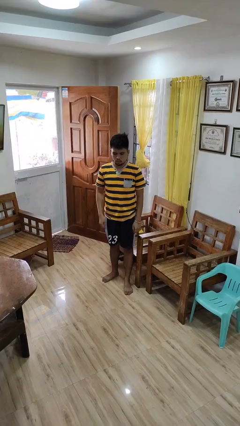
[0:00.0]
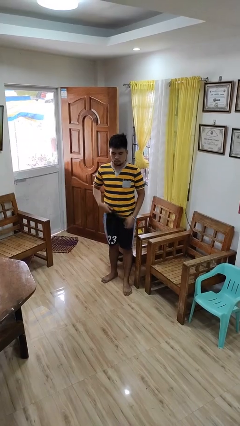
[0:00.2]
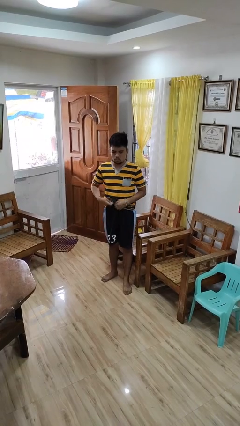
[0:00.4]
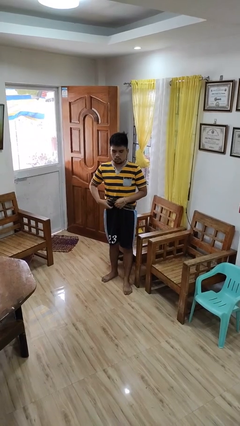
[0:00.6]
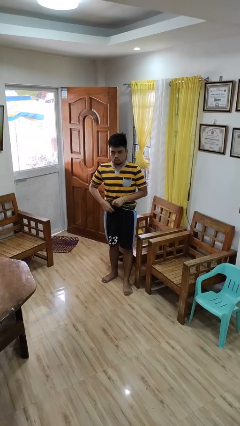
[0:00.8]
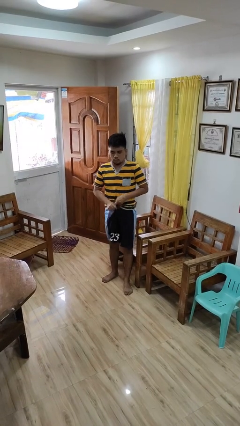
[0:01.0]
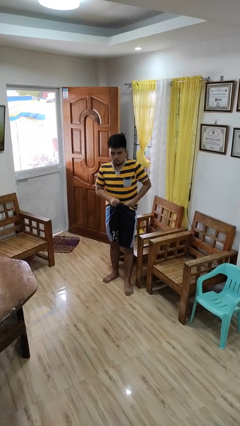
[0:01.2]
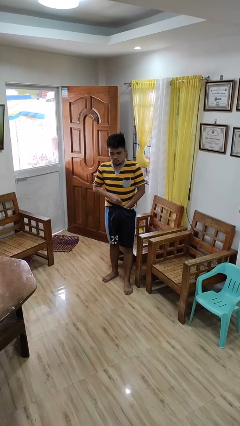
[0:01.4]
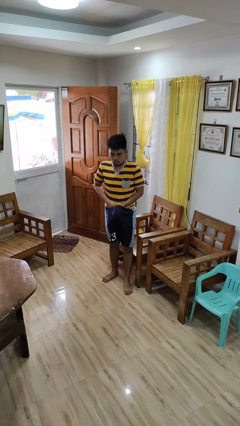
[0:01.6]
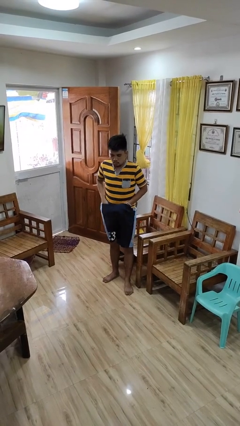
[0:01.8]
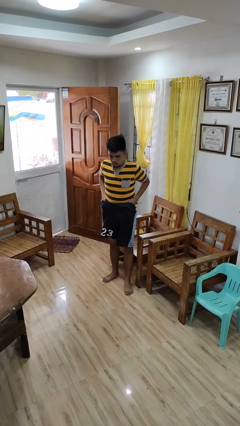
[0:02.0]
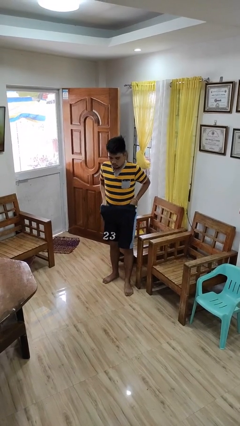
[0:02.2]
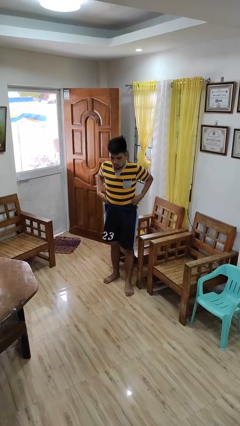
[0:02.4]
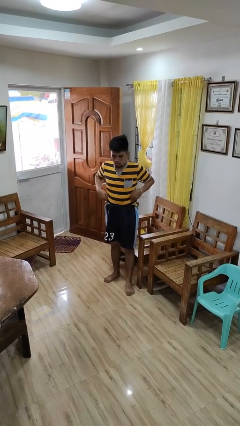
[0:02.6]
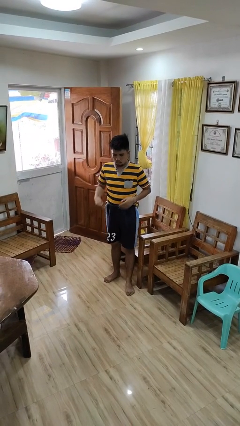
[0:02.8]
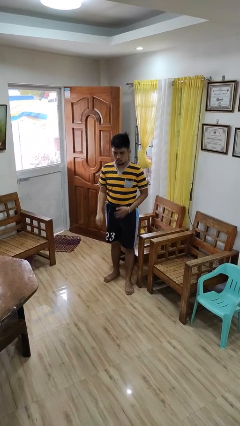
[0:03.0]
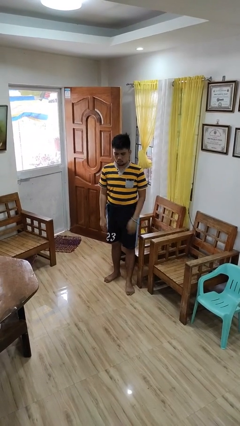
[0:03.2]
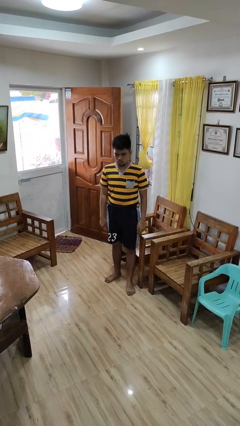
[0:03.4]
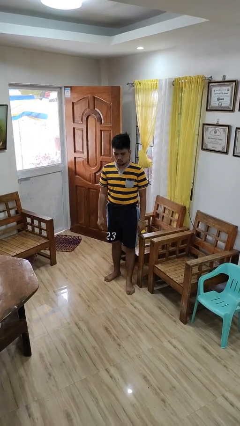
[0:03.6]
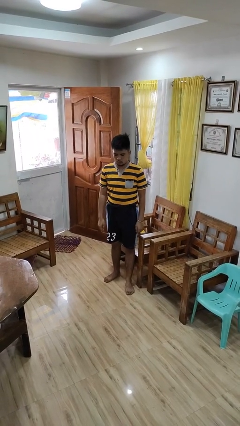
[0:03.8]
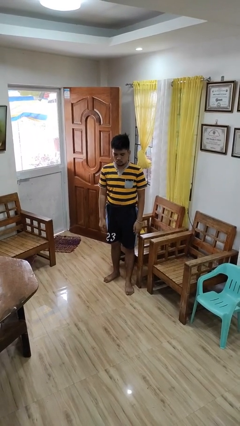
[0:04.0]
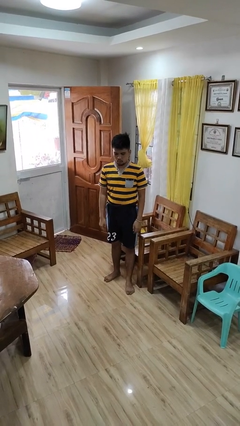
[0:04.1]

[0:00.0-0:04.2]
person tucks in shirt

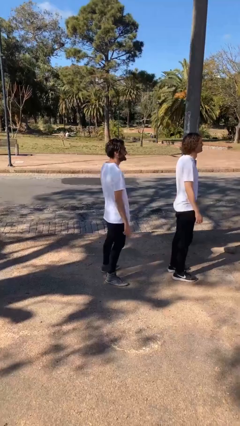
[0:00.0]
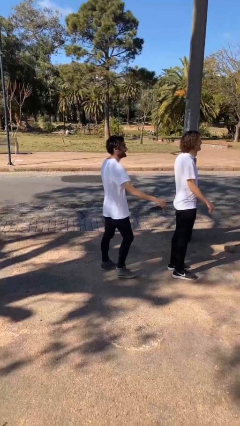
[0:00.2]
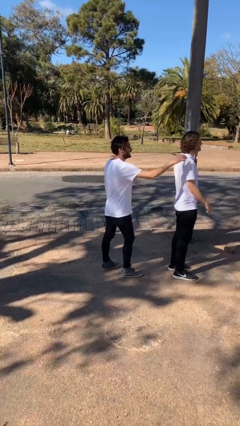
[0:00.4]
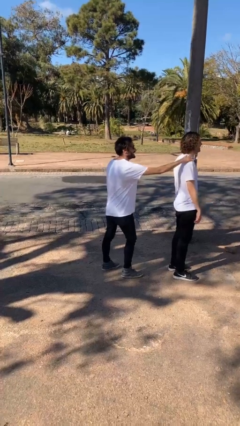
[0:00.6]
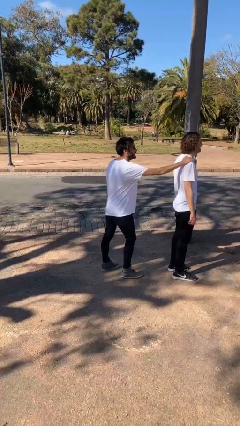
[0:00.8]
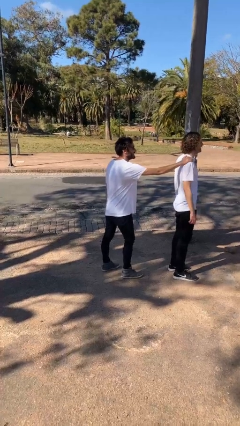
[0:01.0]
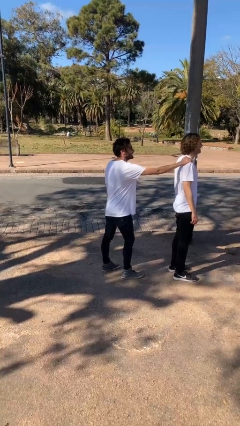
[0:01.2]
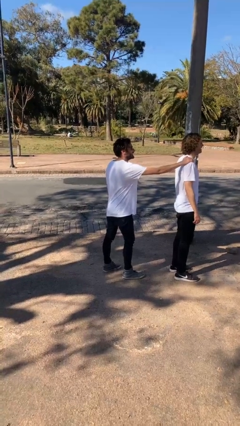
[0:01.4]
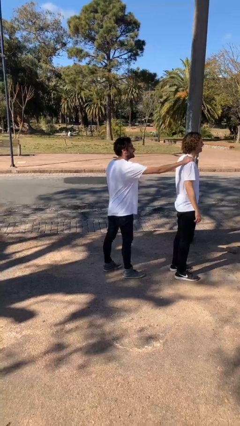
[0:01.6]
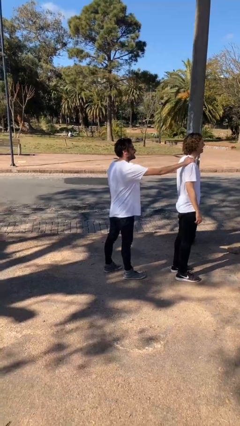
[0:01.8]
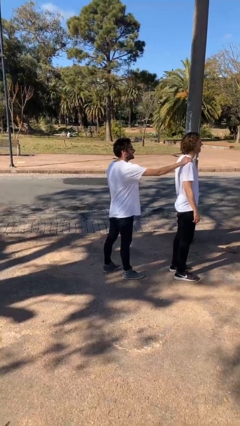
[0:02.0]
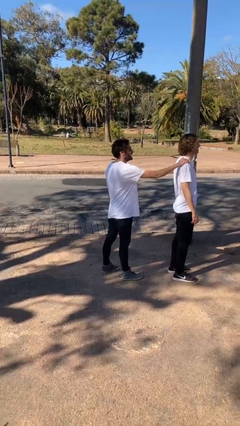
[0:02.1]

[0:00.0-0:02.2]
person grabs person by shoulder

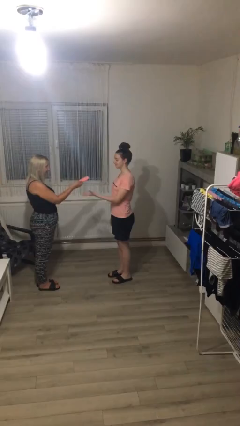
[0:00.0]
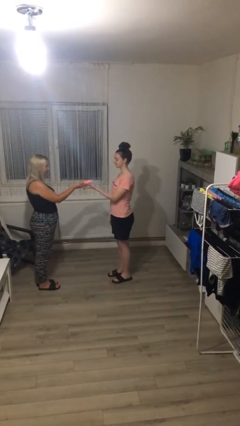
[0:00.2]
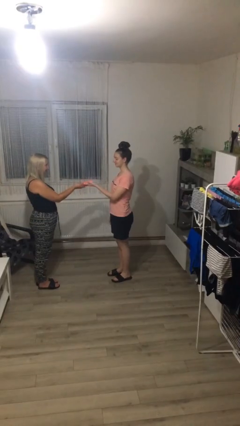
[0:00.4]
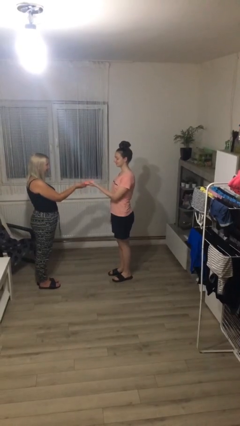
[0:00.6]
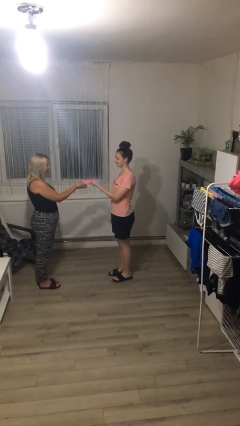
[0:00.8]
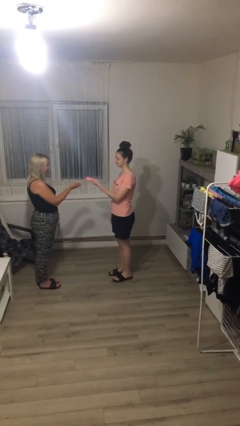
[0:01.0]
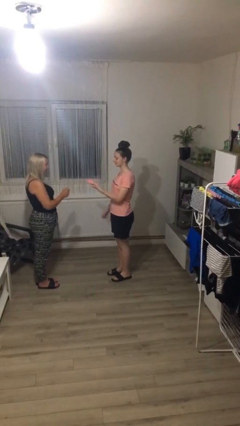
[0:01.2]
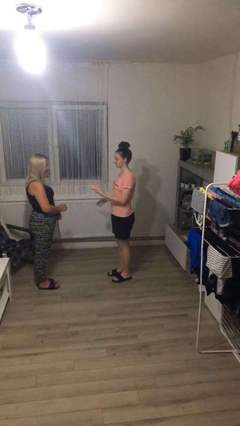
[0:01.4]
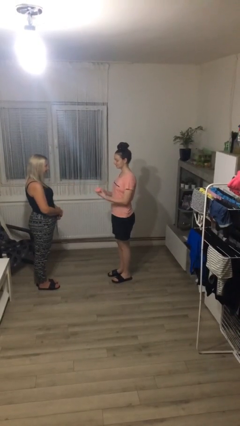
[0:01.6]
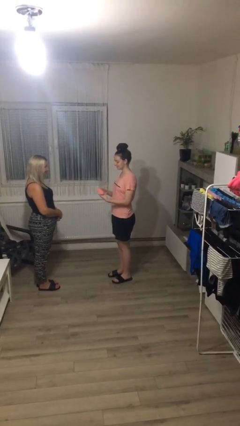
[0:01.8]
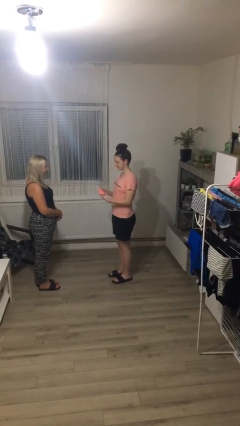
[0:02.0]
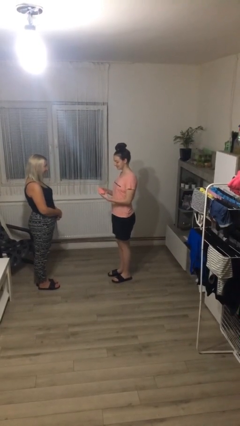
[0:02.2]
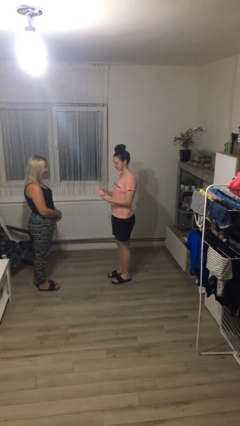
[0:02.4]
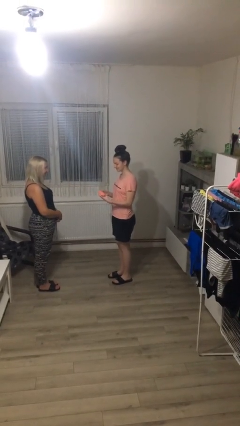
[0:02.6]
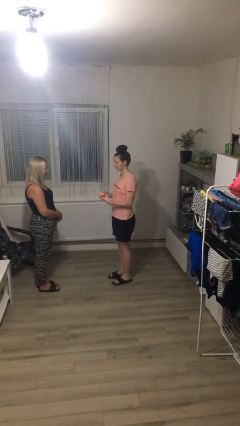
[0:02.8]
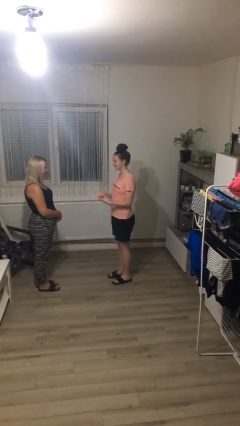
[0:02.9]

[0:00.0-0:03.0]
person transfers object to person

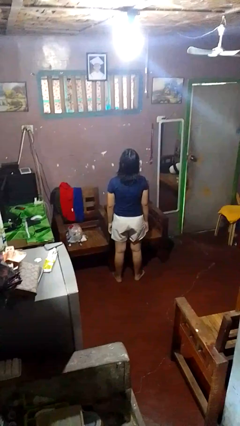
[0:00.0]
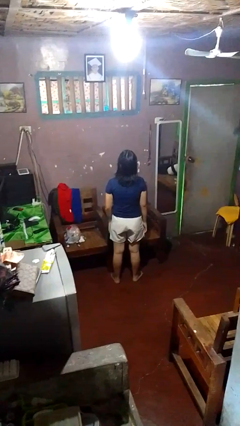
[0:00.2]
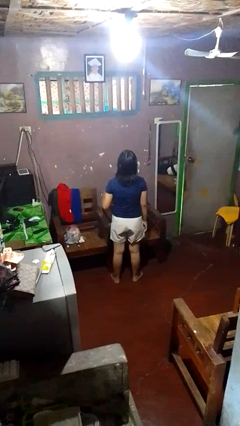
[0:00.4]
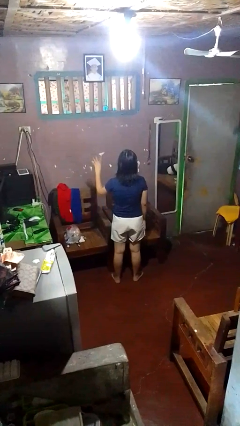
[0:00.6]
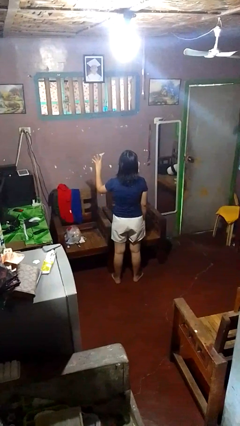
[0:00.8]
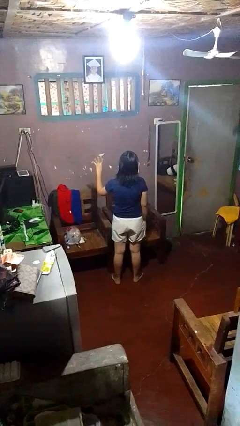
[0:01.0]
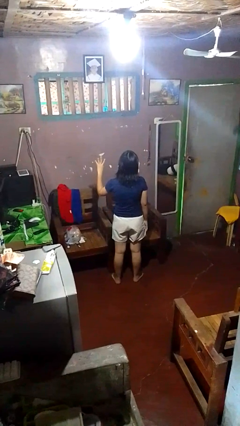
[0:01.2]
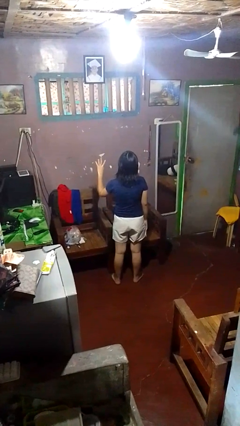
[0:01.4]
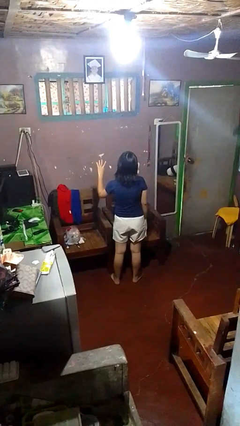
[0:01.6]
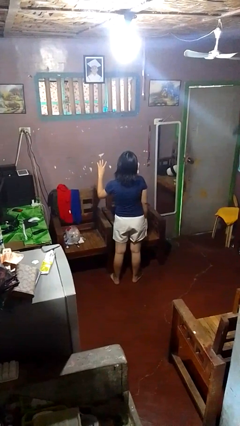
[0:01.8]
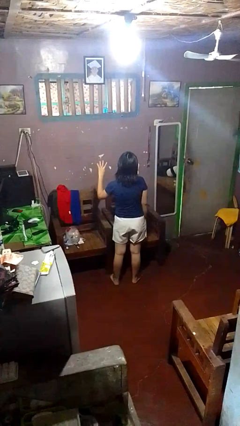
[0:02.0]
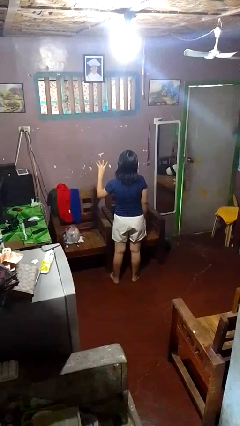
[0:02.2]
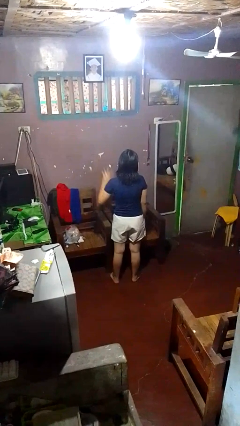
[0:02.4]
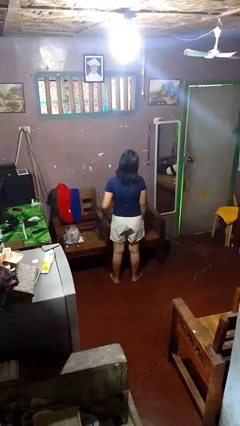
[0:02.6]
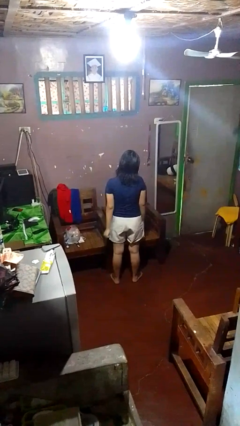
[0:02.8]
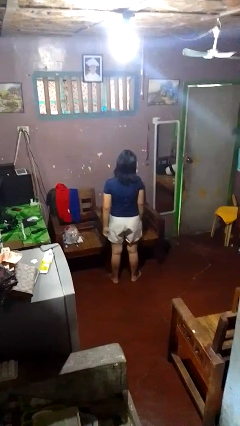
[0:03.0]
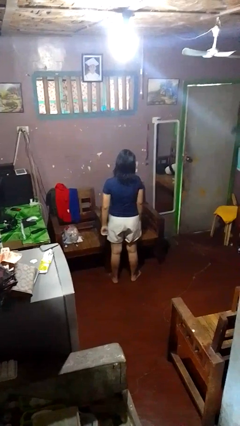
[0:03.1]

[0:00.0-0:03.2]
person gestures number four

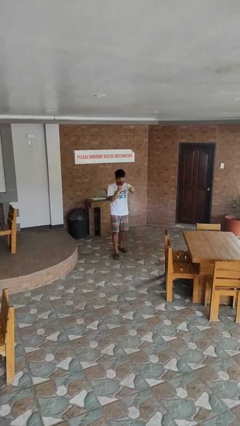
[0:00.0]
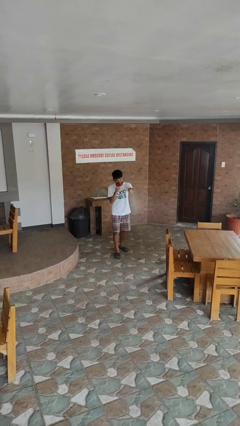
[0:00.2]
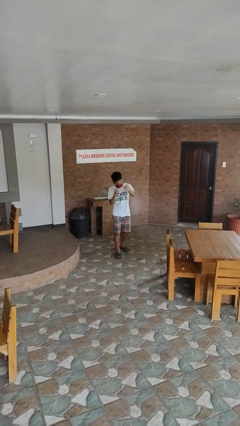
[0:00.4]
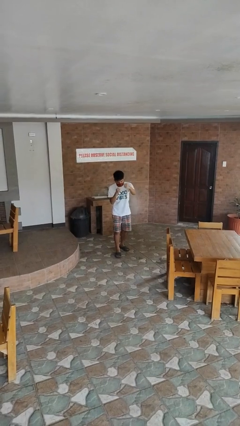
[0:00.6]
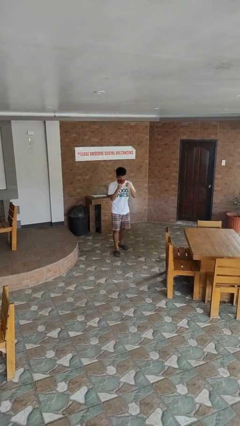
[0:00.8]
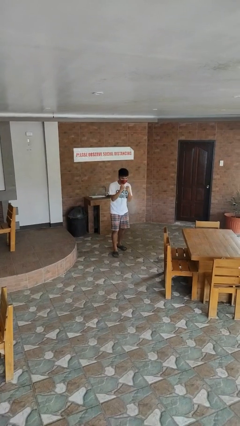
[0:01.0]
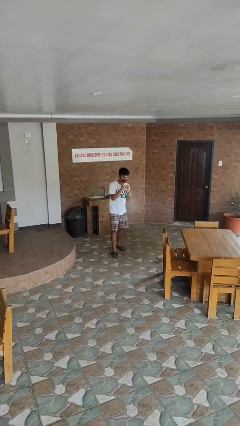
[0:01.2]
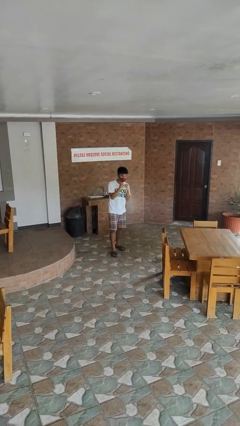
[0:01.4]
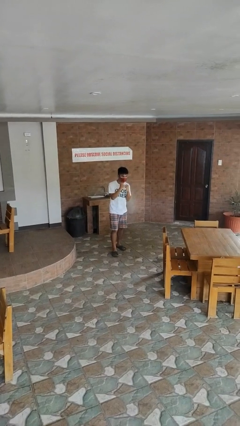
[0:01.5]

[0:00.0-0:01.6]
person punches

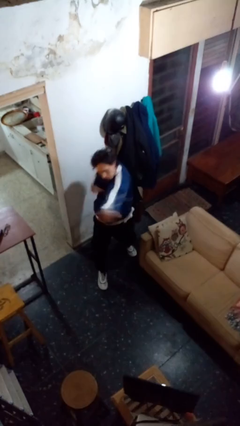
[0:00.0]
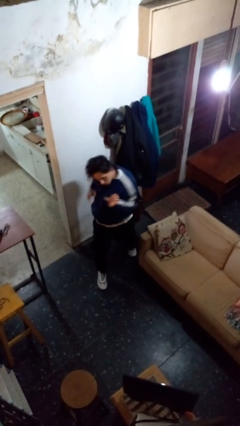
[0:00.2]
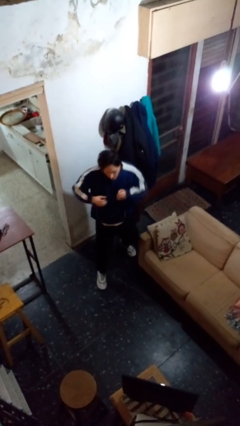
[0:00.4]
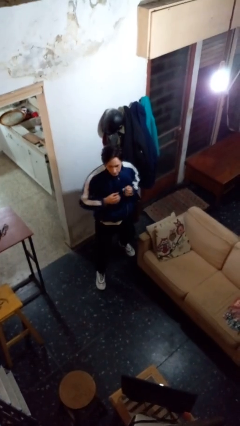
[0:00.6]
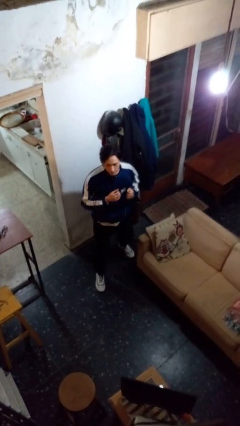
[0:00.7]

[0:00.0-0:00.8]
person karate chop

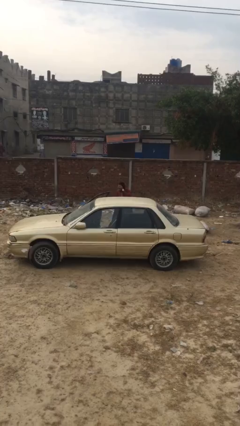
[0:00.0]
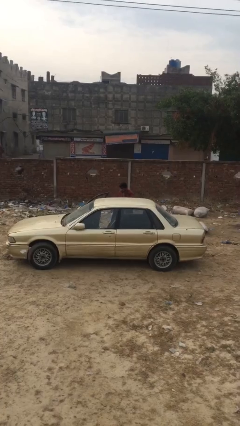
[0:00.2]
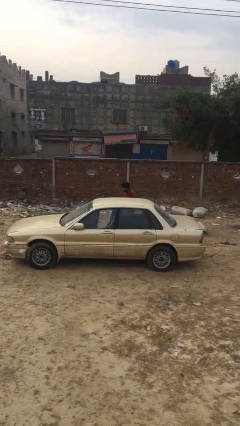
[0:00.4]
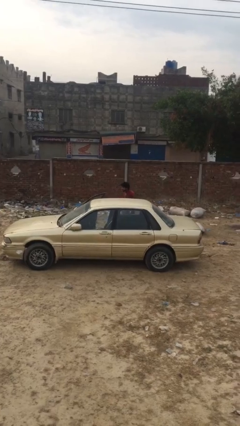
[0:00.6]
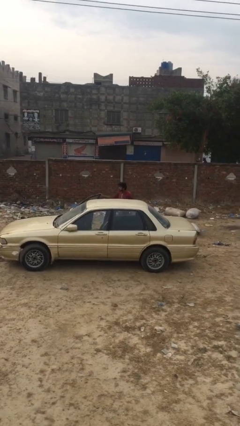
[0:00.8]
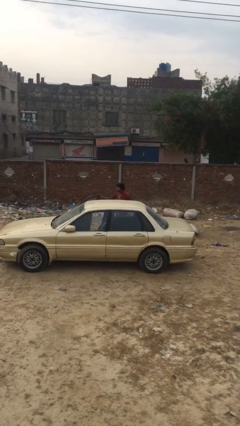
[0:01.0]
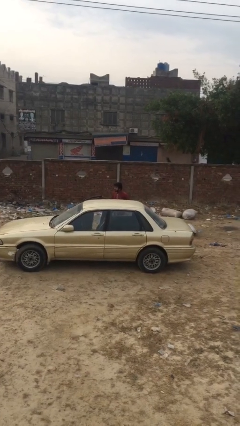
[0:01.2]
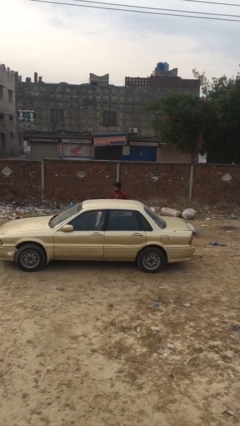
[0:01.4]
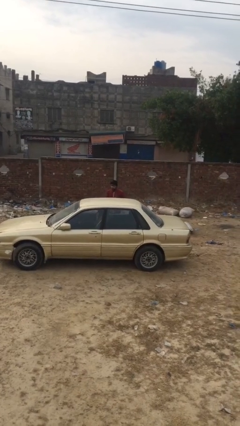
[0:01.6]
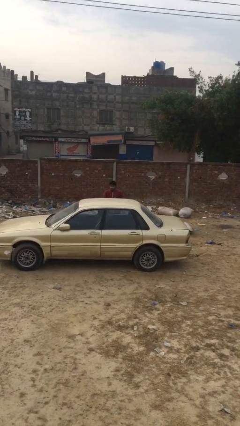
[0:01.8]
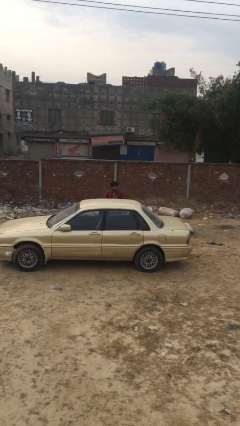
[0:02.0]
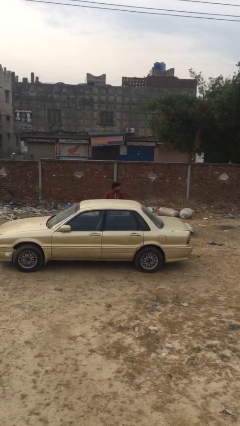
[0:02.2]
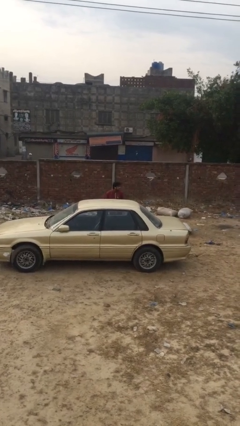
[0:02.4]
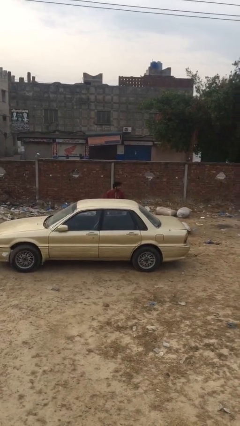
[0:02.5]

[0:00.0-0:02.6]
person closes car door
